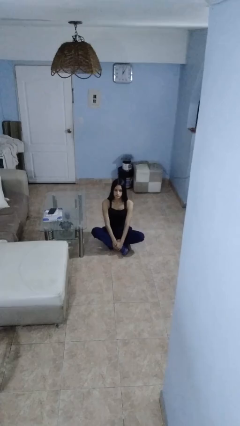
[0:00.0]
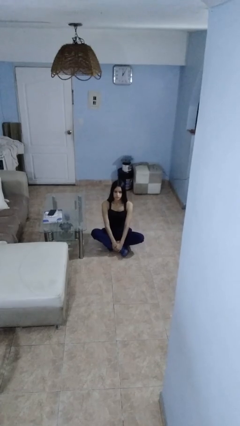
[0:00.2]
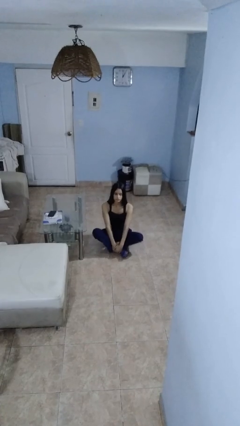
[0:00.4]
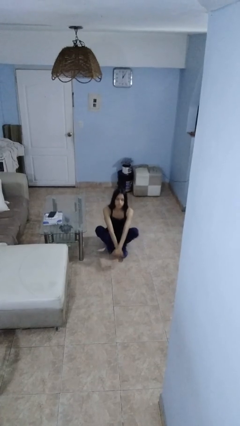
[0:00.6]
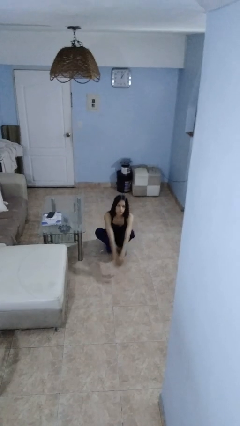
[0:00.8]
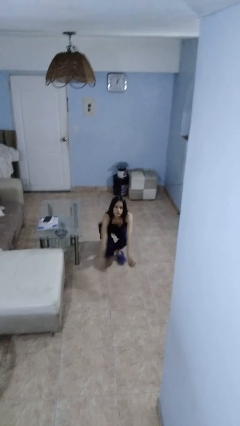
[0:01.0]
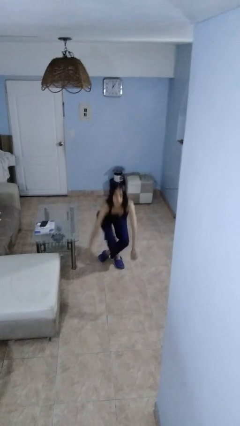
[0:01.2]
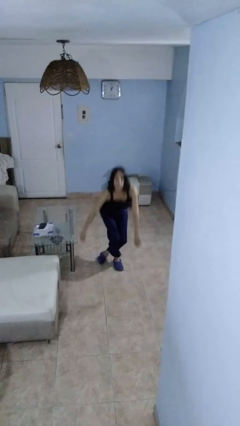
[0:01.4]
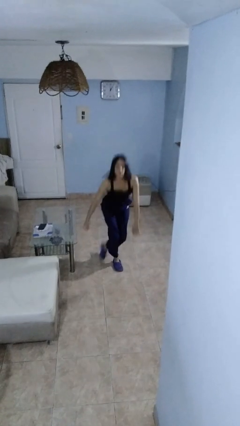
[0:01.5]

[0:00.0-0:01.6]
person stands up from floor

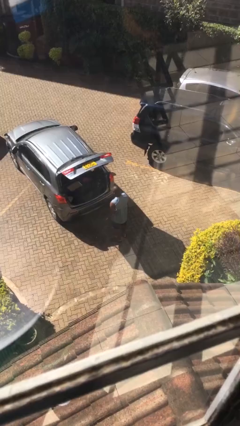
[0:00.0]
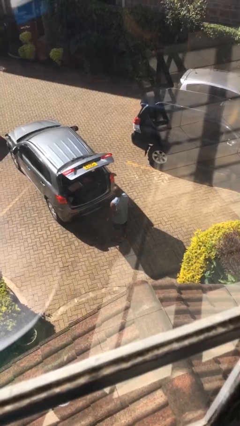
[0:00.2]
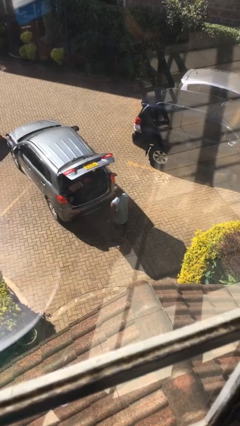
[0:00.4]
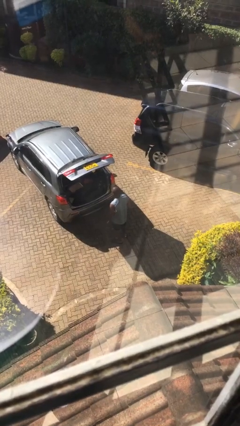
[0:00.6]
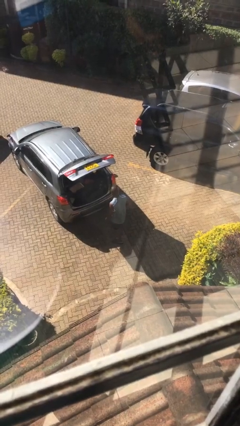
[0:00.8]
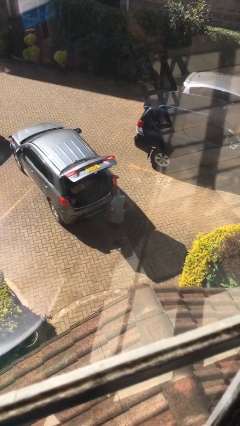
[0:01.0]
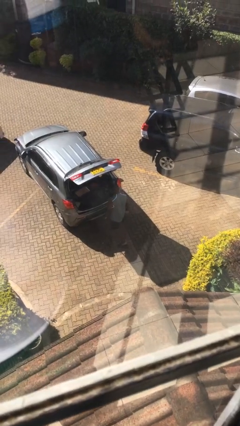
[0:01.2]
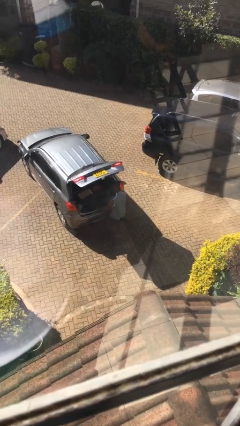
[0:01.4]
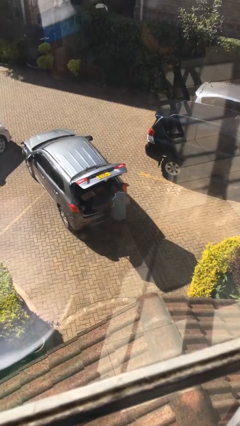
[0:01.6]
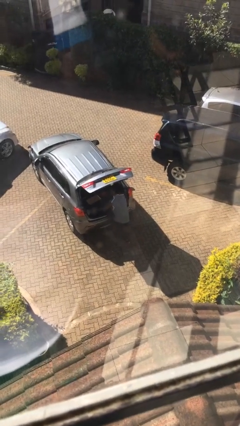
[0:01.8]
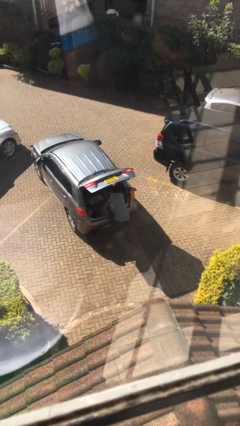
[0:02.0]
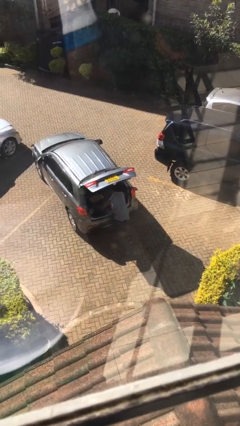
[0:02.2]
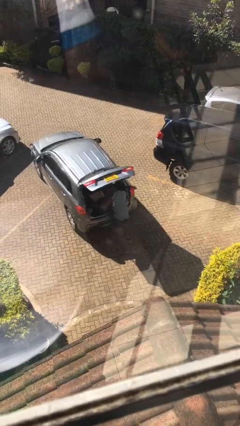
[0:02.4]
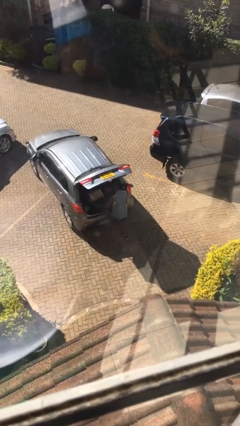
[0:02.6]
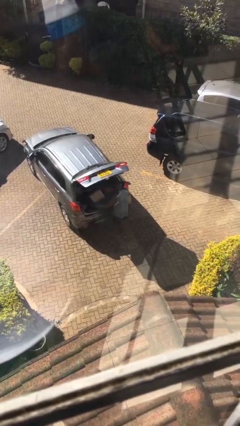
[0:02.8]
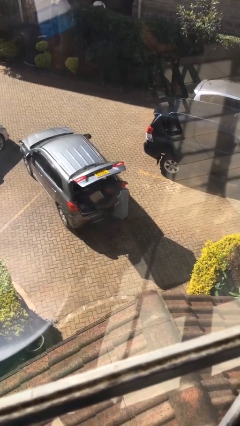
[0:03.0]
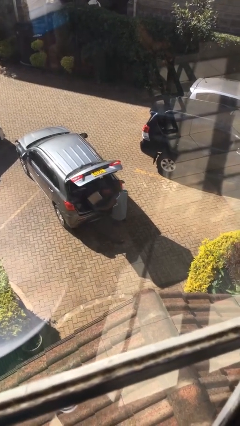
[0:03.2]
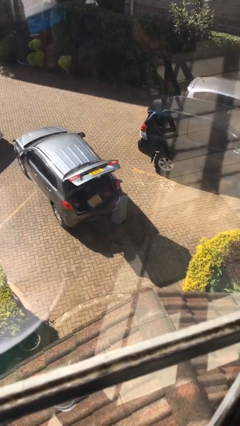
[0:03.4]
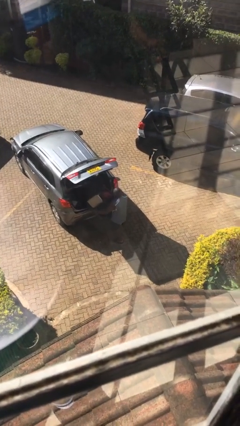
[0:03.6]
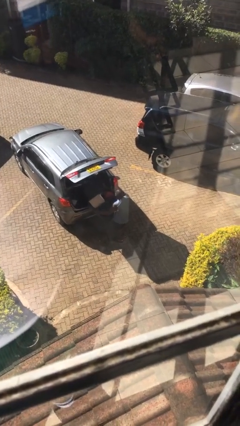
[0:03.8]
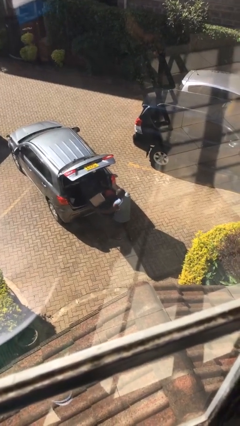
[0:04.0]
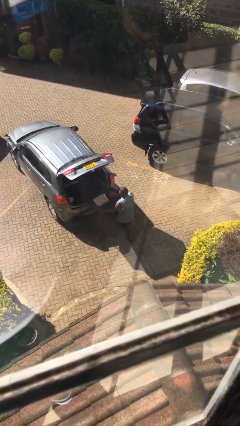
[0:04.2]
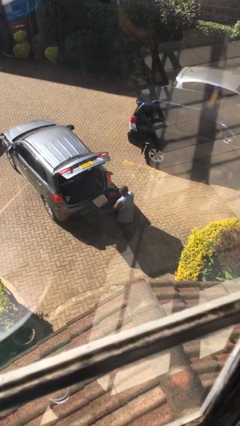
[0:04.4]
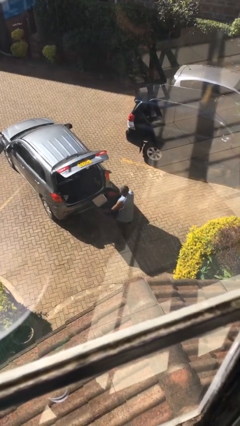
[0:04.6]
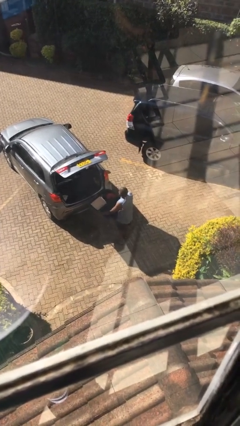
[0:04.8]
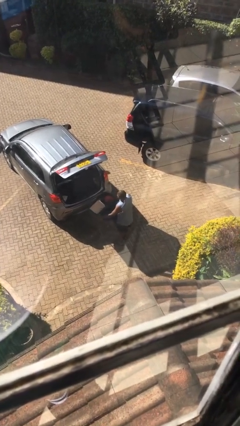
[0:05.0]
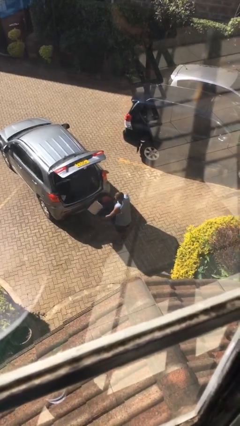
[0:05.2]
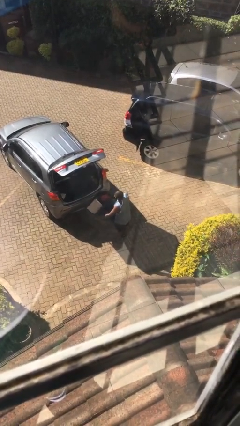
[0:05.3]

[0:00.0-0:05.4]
person unloads car

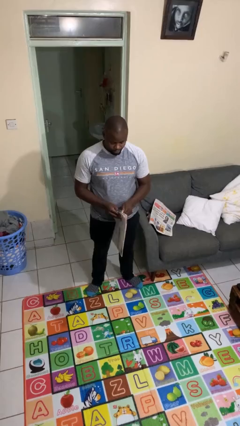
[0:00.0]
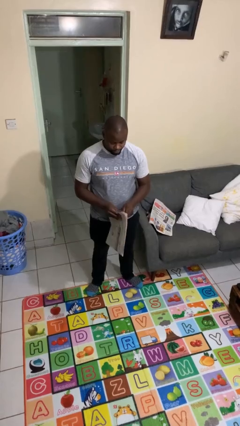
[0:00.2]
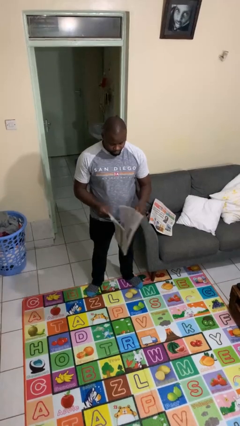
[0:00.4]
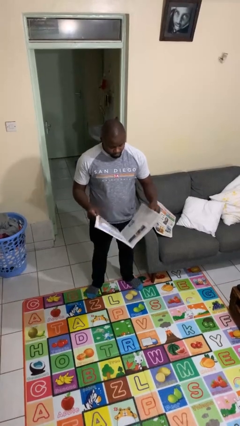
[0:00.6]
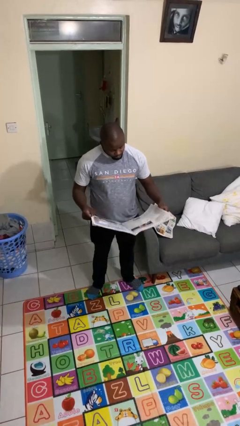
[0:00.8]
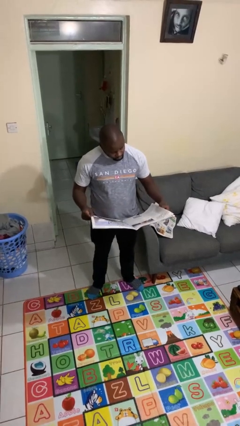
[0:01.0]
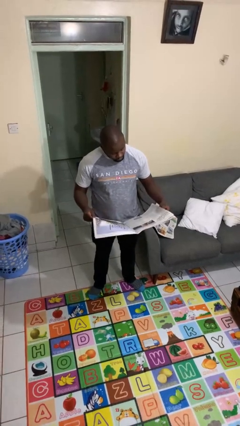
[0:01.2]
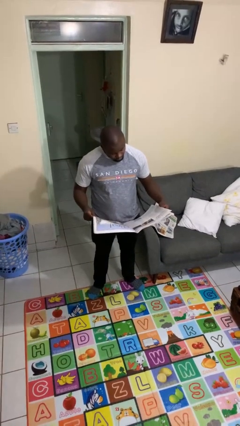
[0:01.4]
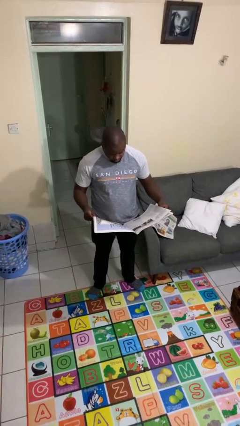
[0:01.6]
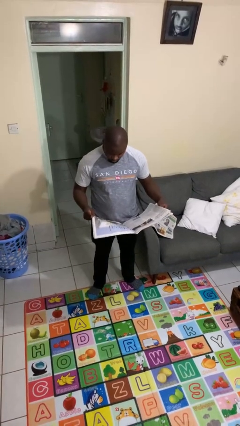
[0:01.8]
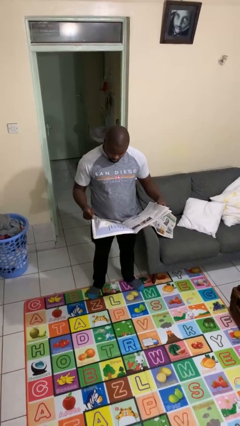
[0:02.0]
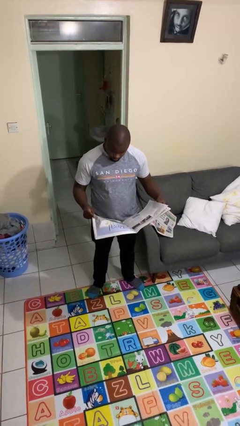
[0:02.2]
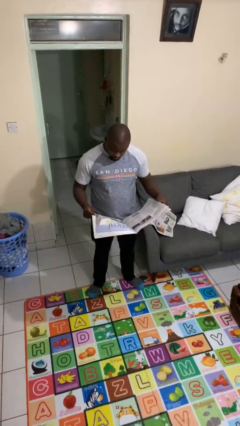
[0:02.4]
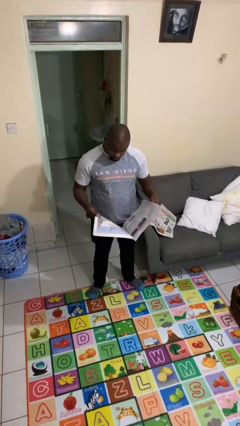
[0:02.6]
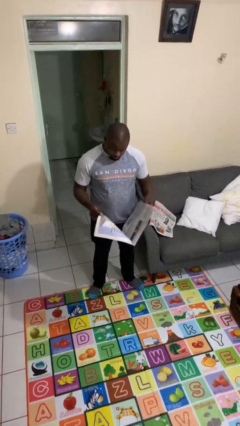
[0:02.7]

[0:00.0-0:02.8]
person reads newspaper

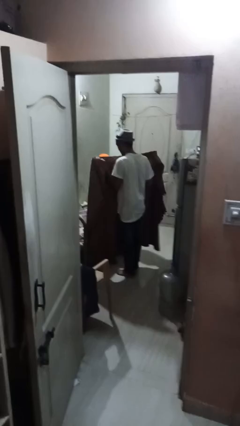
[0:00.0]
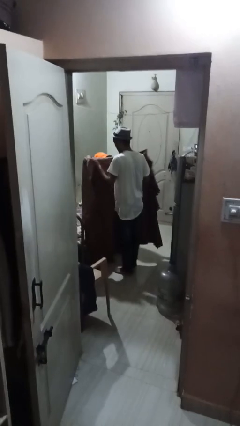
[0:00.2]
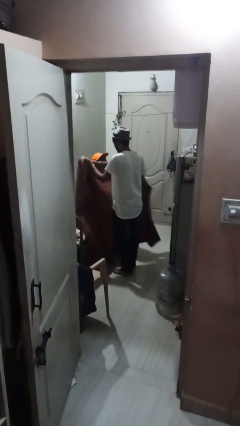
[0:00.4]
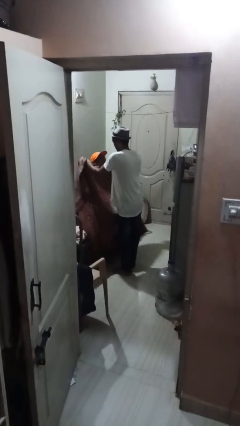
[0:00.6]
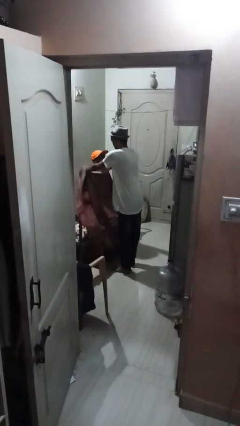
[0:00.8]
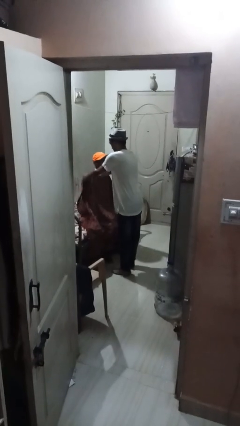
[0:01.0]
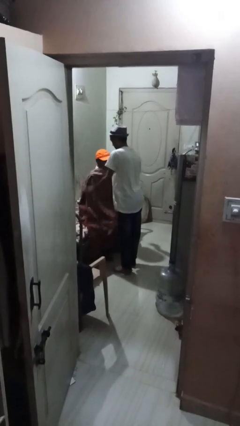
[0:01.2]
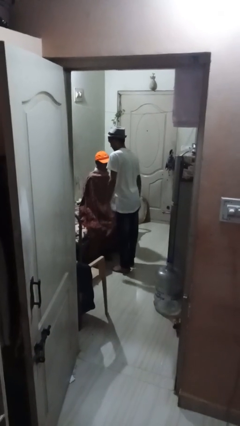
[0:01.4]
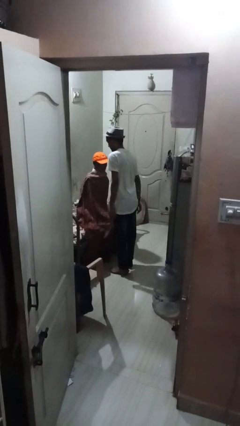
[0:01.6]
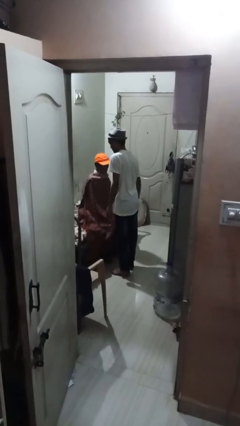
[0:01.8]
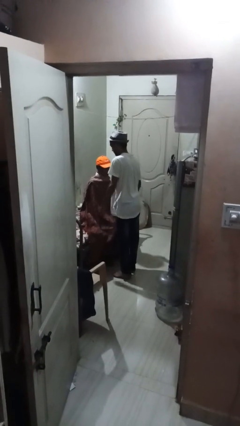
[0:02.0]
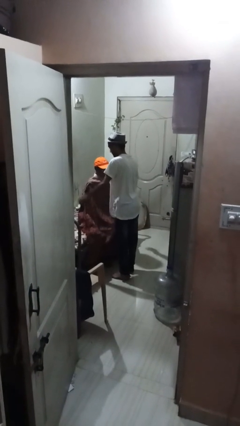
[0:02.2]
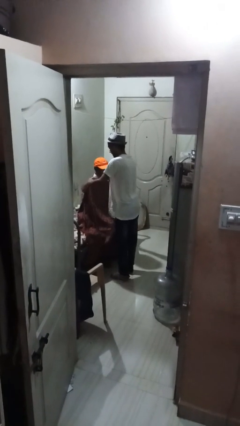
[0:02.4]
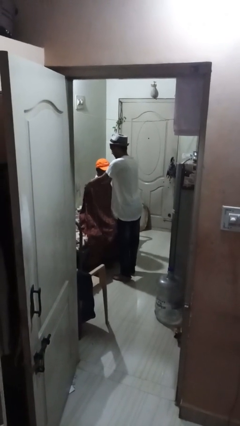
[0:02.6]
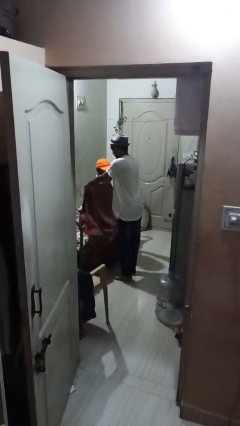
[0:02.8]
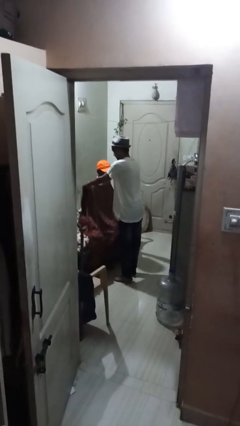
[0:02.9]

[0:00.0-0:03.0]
person covers friend with blanket

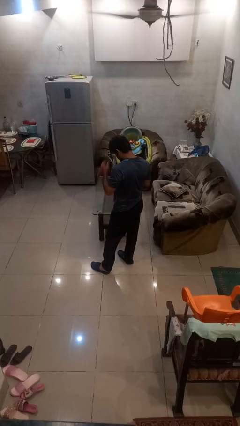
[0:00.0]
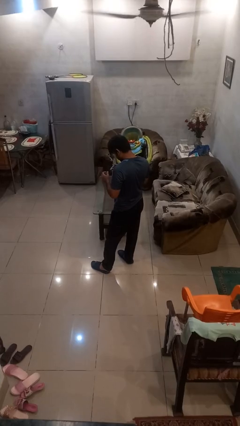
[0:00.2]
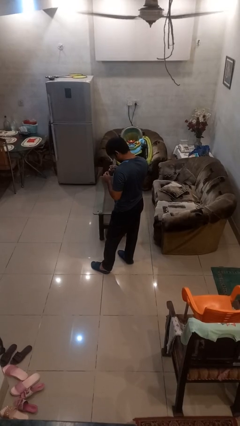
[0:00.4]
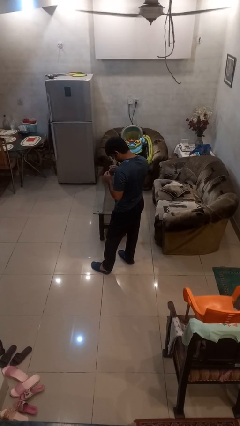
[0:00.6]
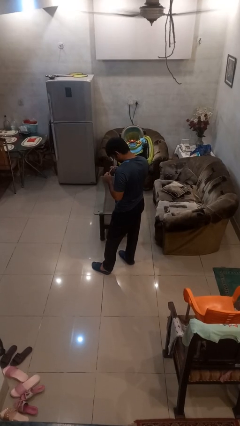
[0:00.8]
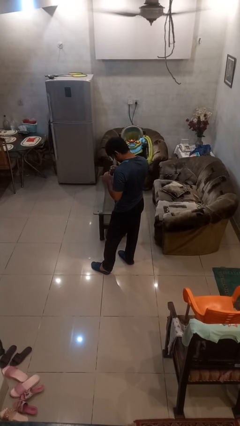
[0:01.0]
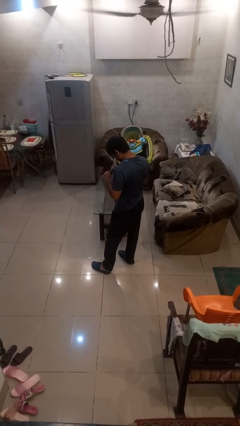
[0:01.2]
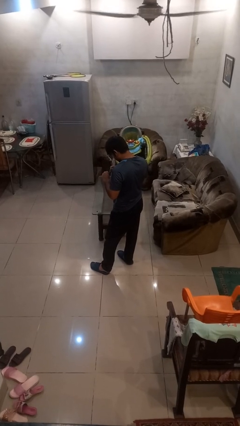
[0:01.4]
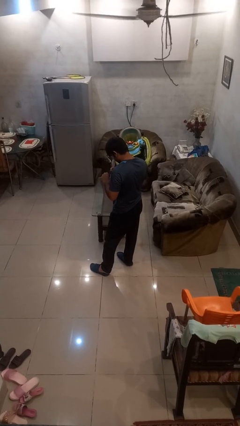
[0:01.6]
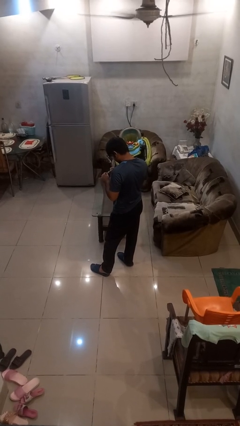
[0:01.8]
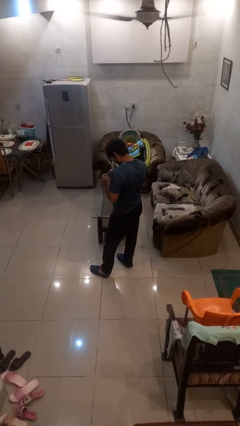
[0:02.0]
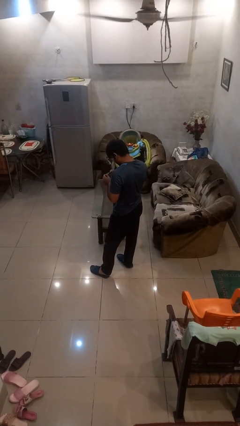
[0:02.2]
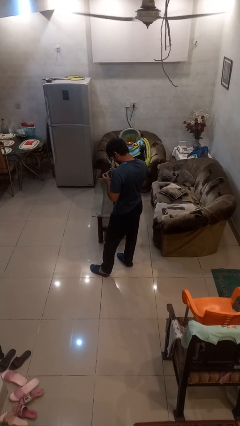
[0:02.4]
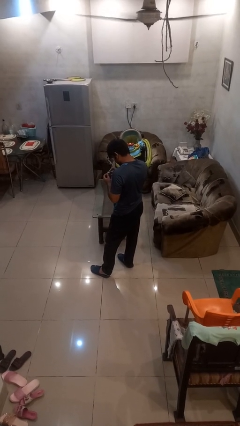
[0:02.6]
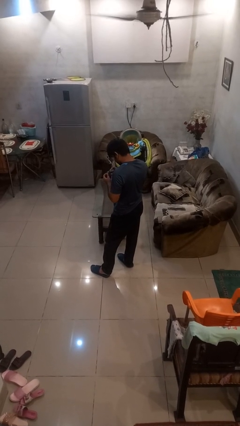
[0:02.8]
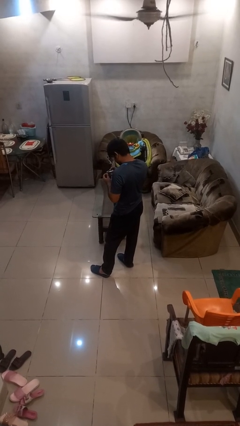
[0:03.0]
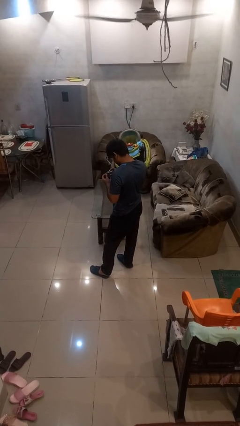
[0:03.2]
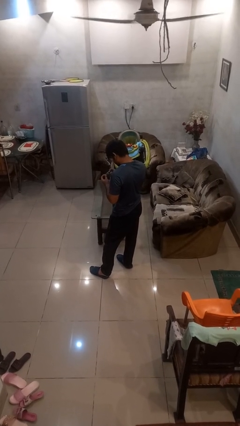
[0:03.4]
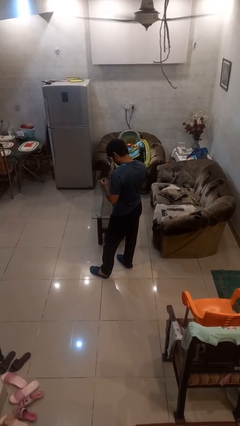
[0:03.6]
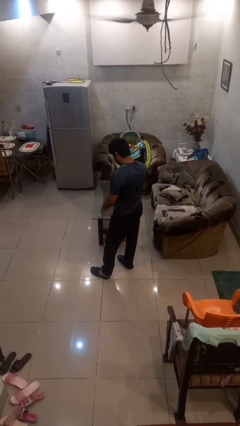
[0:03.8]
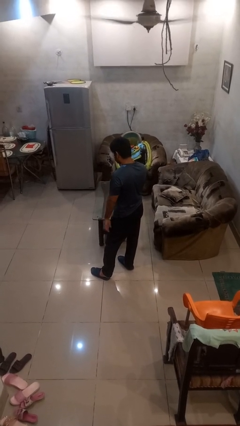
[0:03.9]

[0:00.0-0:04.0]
person clips fingernails

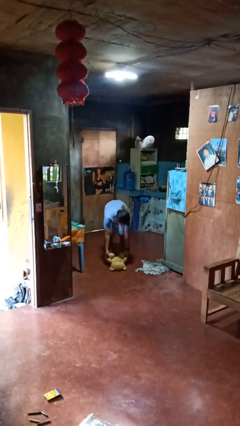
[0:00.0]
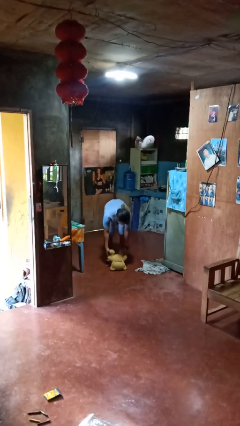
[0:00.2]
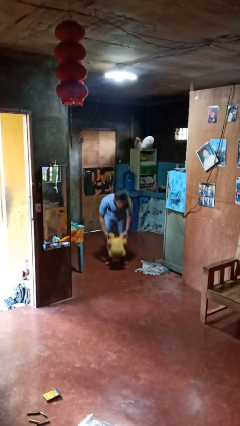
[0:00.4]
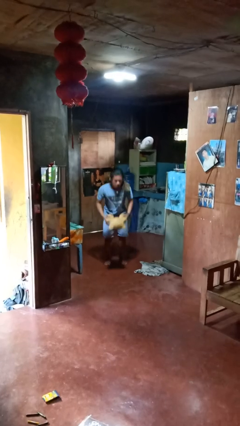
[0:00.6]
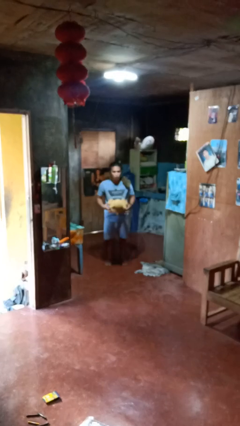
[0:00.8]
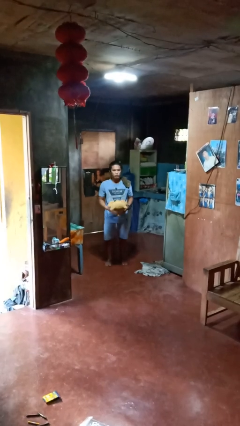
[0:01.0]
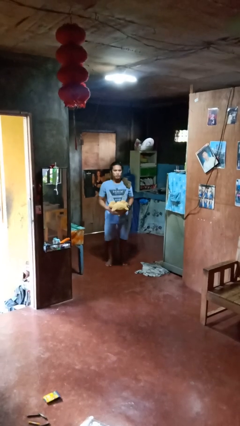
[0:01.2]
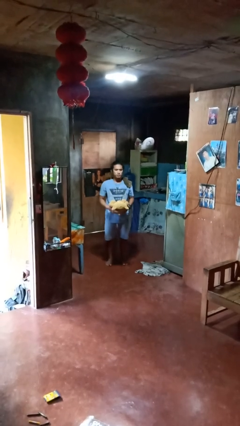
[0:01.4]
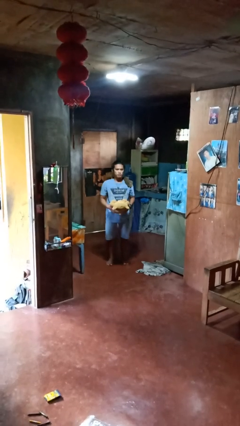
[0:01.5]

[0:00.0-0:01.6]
person picks up object from floor
